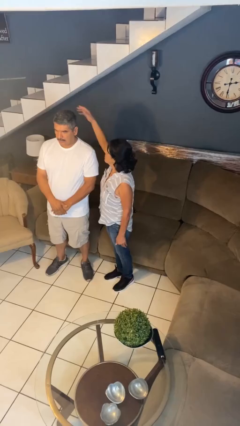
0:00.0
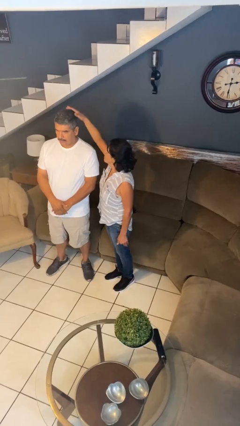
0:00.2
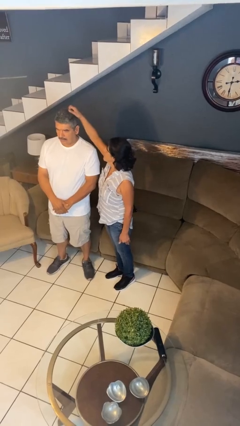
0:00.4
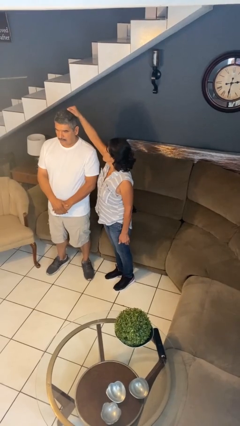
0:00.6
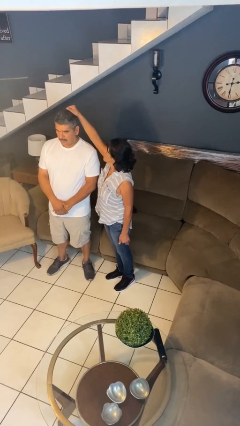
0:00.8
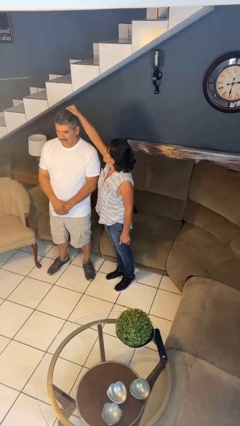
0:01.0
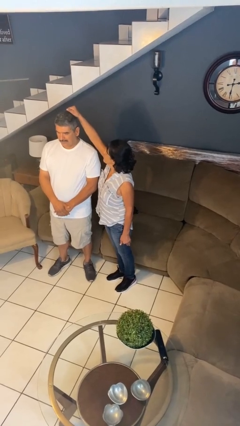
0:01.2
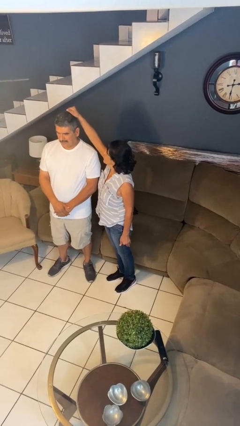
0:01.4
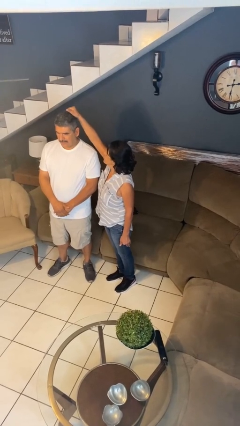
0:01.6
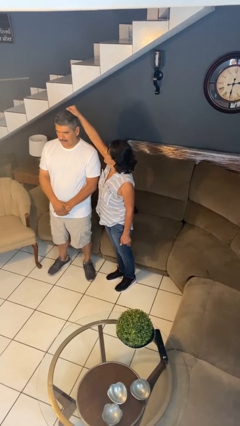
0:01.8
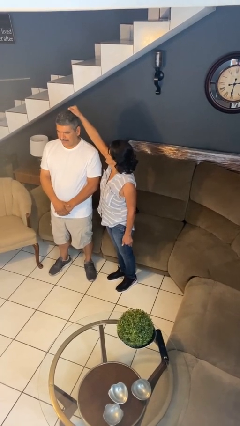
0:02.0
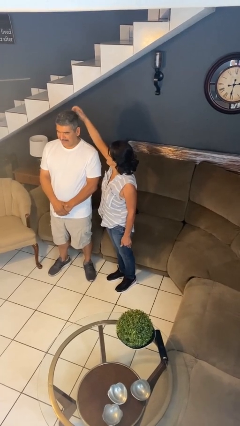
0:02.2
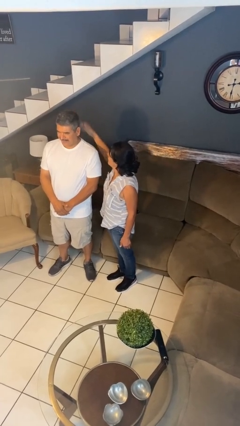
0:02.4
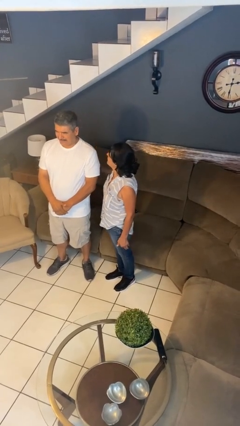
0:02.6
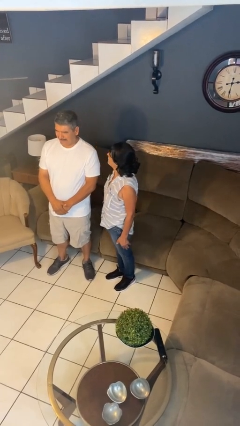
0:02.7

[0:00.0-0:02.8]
person grabs person by hair

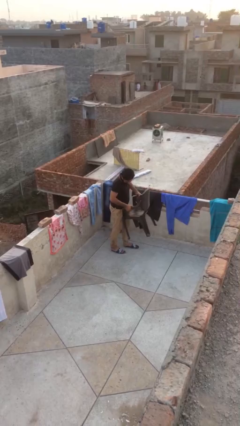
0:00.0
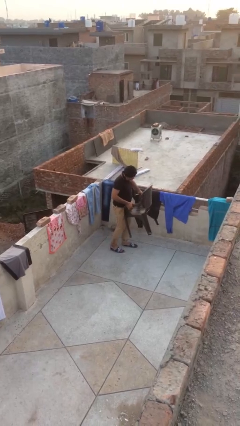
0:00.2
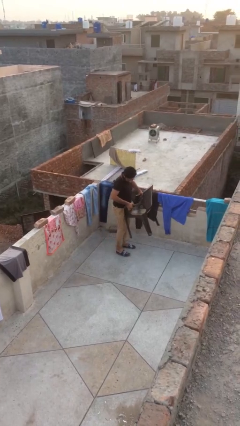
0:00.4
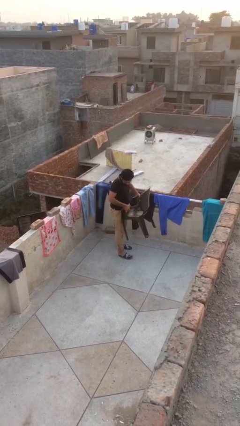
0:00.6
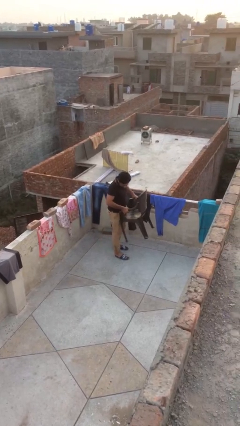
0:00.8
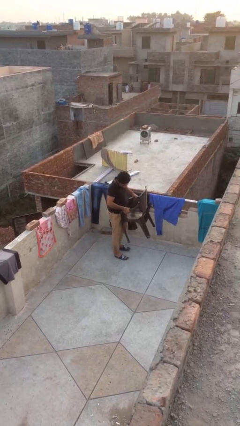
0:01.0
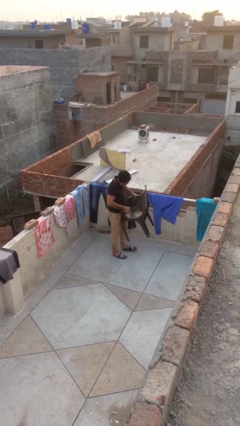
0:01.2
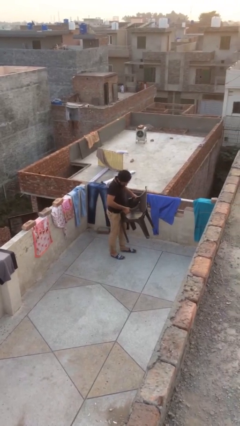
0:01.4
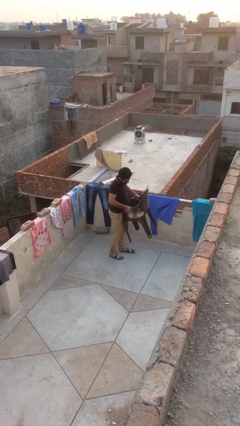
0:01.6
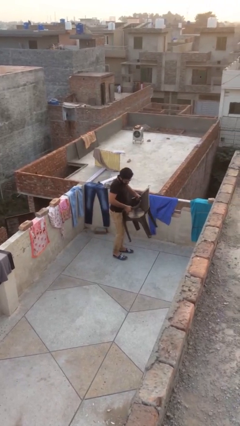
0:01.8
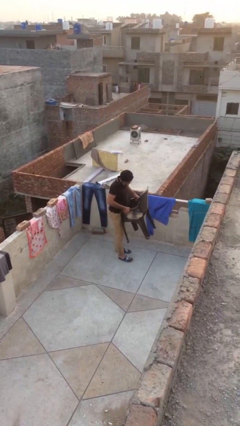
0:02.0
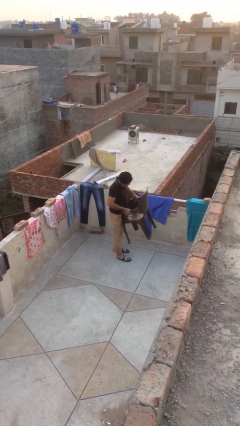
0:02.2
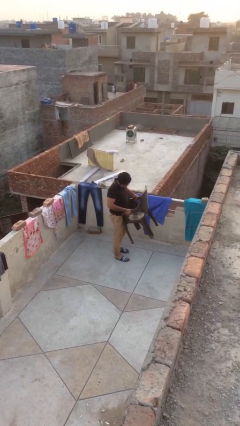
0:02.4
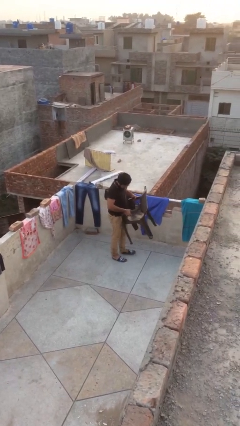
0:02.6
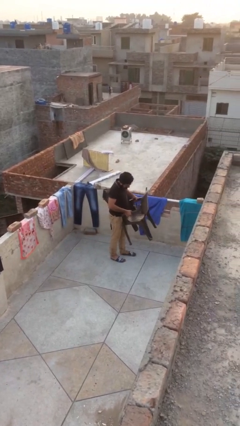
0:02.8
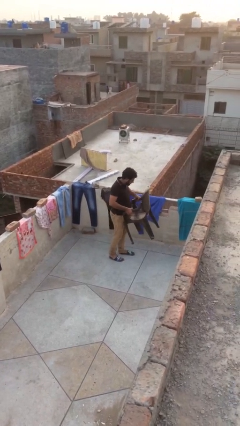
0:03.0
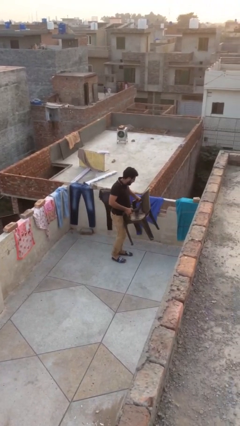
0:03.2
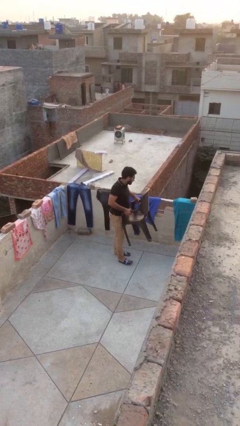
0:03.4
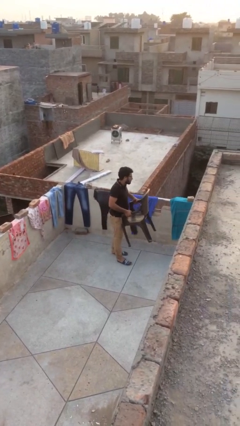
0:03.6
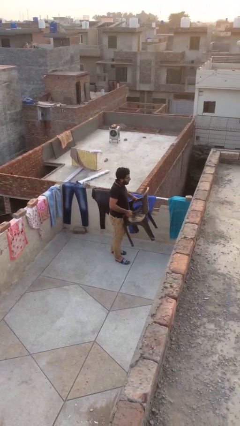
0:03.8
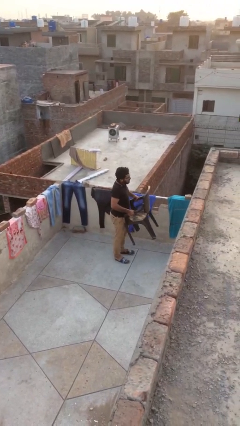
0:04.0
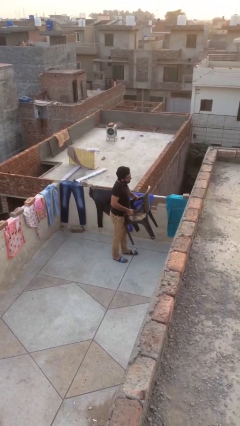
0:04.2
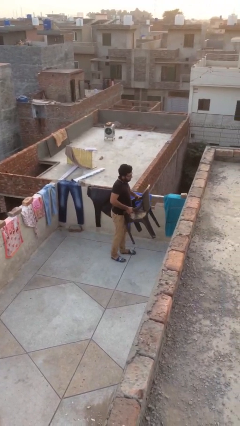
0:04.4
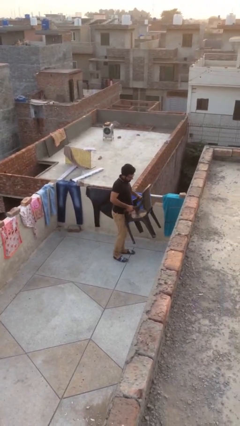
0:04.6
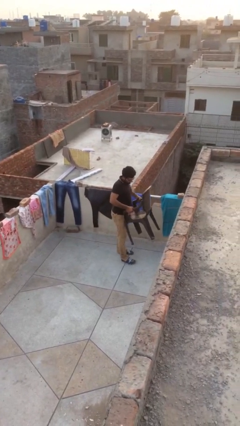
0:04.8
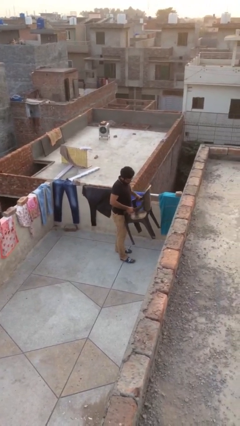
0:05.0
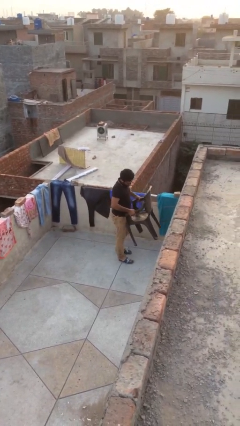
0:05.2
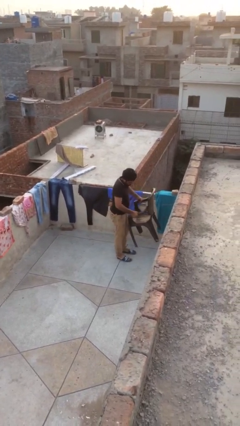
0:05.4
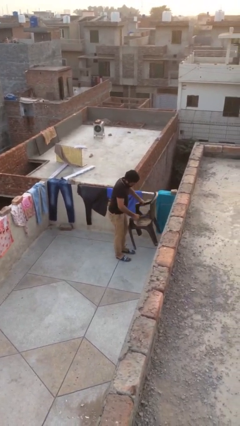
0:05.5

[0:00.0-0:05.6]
person carries heavy object

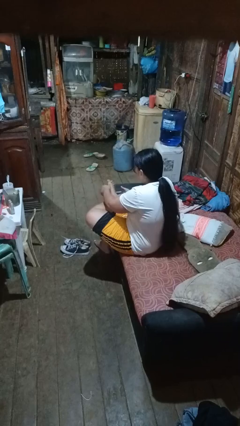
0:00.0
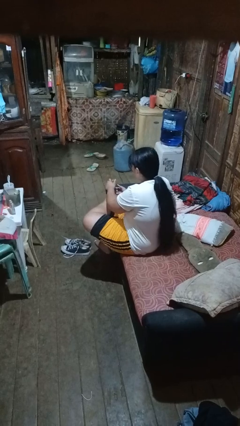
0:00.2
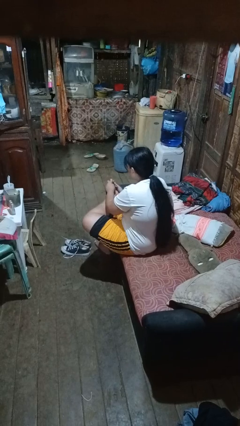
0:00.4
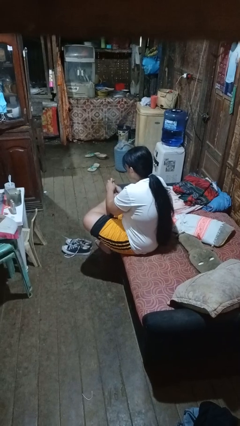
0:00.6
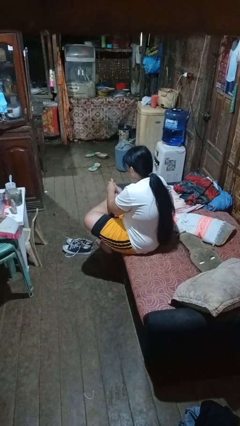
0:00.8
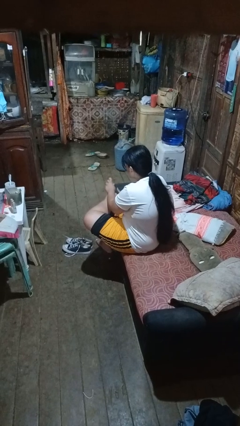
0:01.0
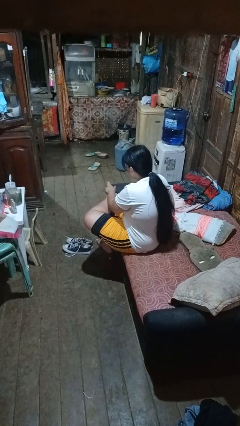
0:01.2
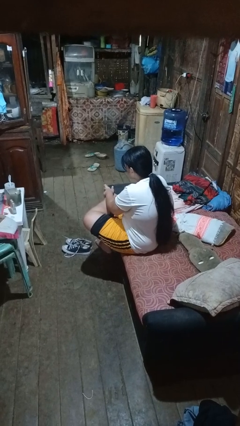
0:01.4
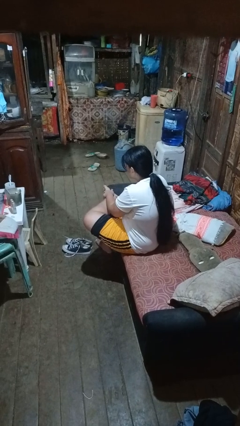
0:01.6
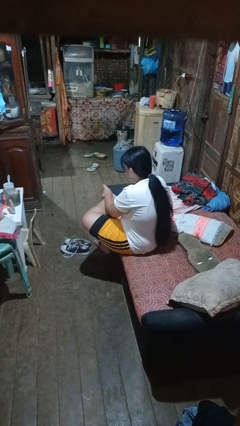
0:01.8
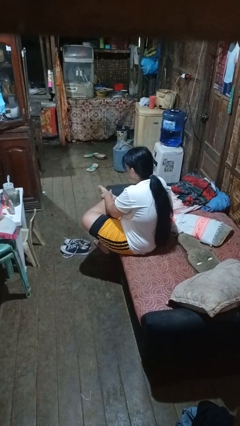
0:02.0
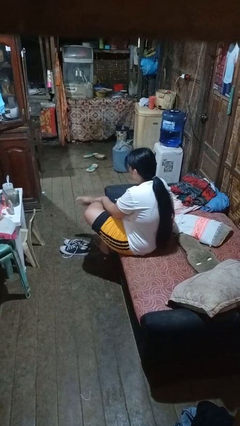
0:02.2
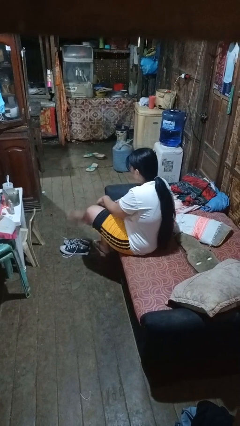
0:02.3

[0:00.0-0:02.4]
person rubs foot

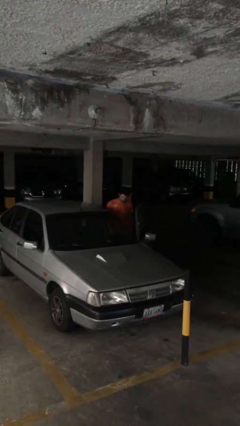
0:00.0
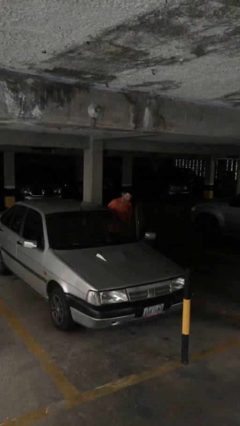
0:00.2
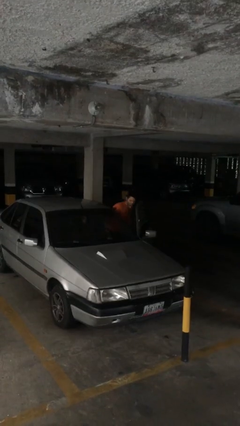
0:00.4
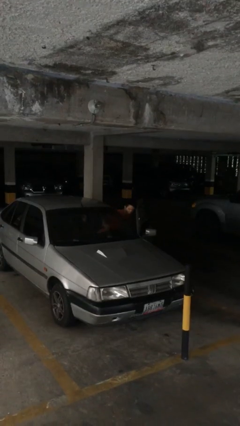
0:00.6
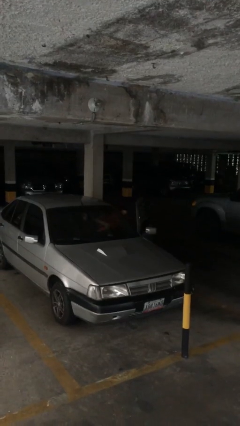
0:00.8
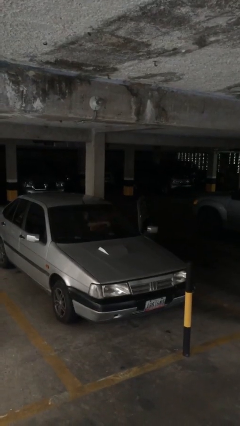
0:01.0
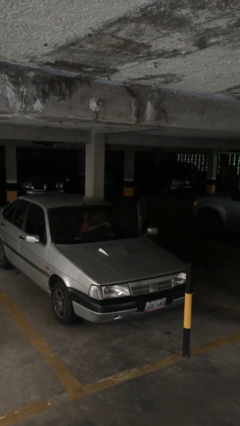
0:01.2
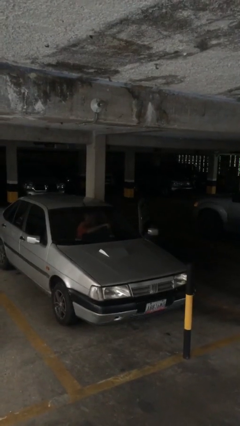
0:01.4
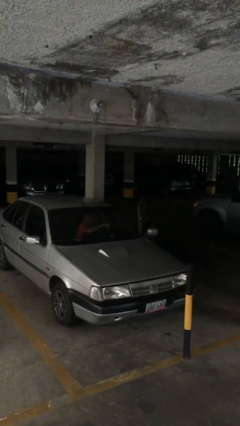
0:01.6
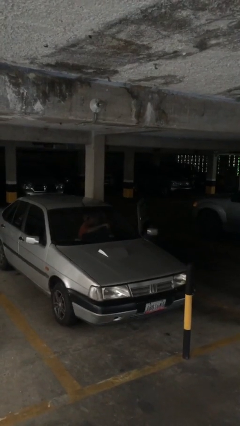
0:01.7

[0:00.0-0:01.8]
person enters car

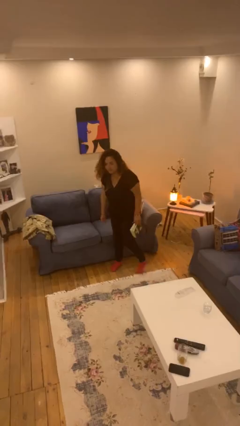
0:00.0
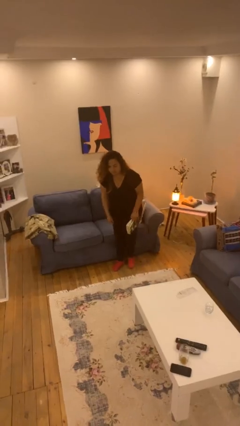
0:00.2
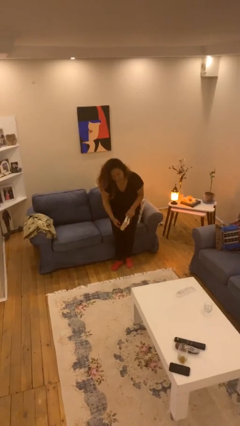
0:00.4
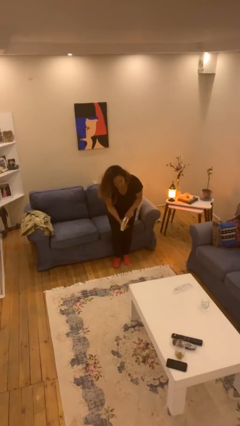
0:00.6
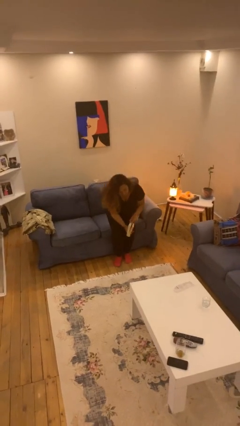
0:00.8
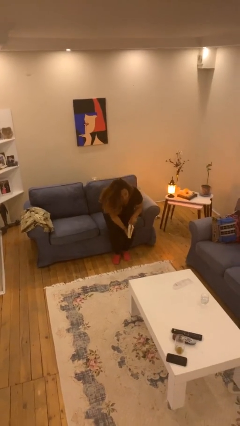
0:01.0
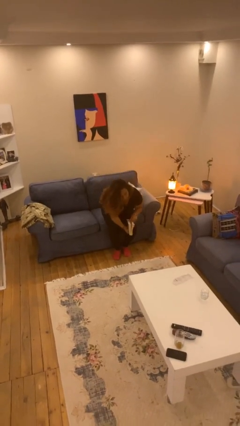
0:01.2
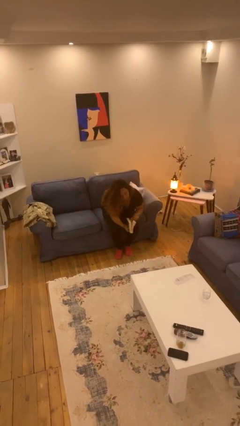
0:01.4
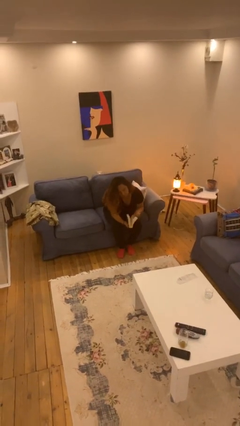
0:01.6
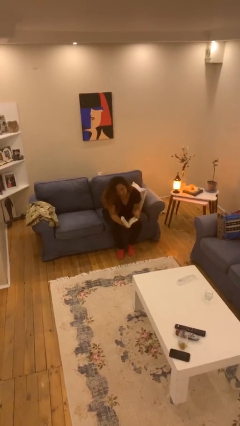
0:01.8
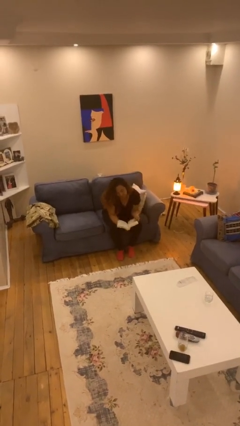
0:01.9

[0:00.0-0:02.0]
person sits down

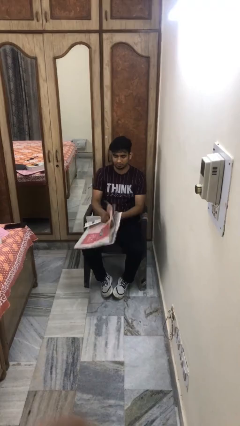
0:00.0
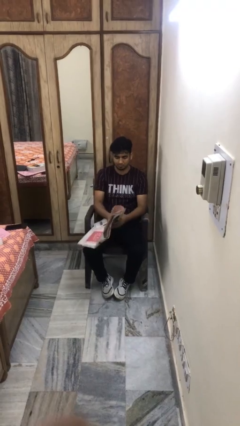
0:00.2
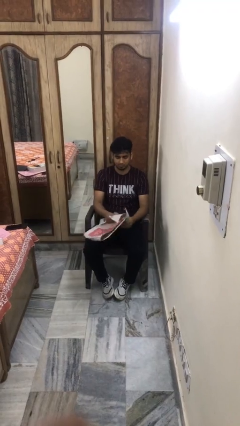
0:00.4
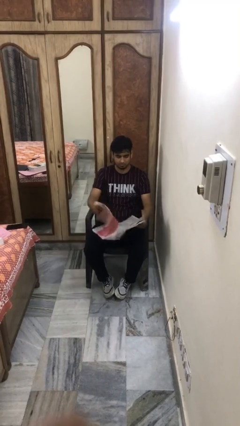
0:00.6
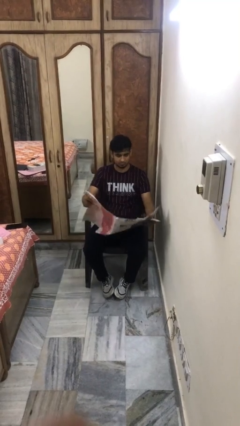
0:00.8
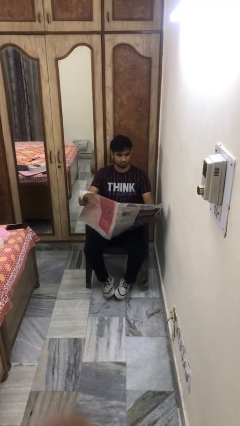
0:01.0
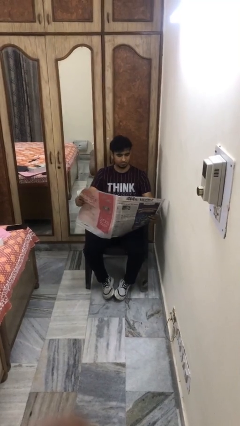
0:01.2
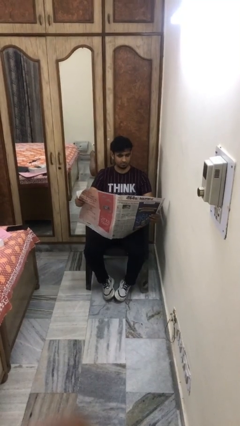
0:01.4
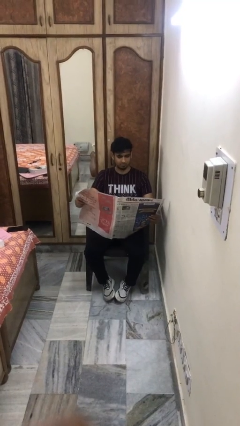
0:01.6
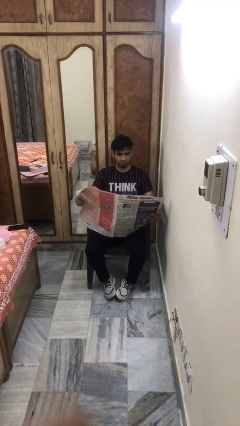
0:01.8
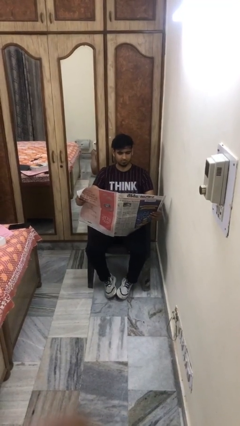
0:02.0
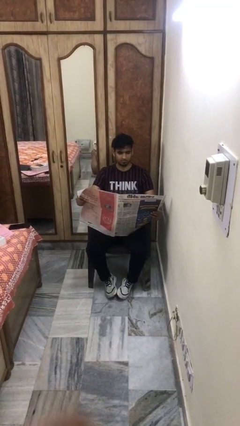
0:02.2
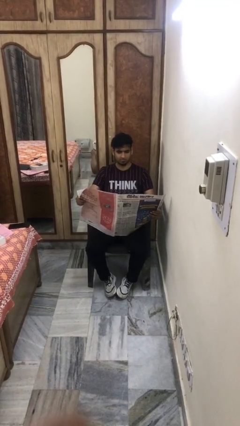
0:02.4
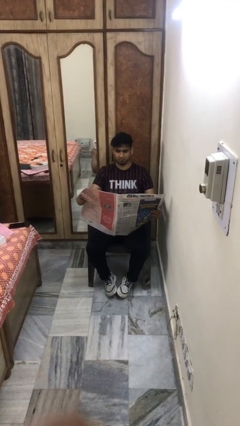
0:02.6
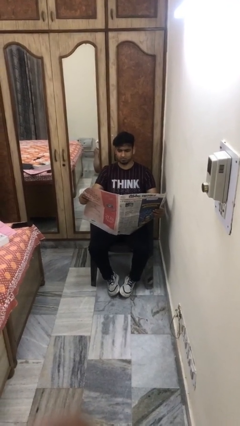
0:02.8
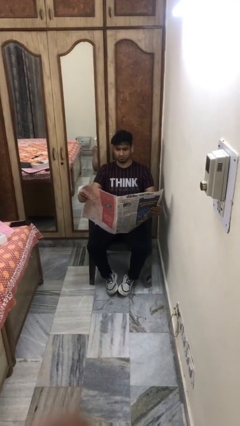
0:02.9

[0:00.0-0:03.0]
person reads newspaper
